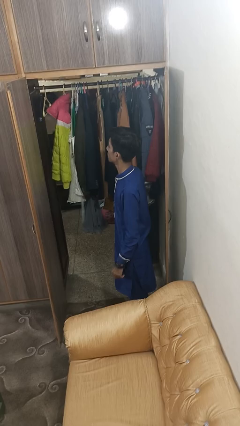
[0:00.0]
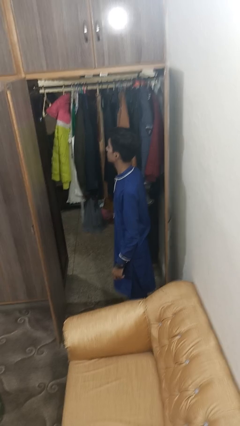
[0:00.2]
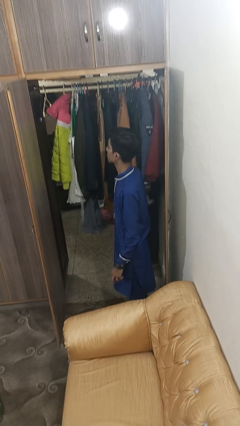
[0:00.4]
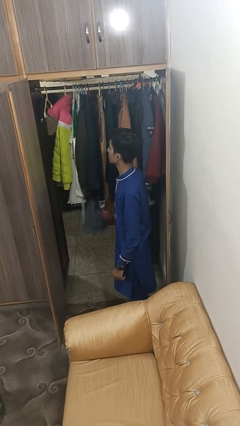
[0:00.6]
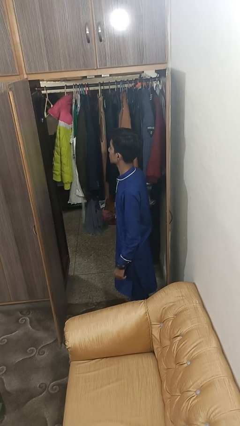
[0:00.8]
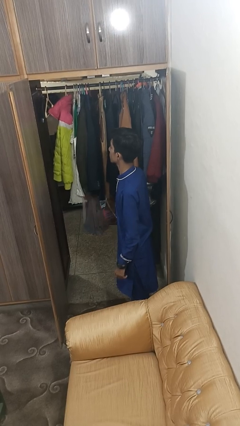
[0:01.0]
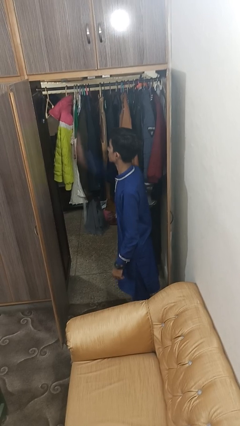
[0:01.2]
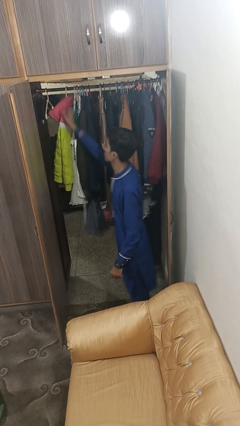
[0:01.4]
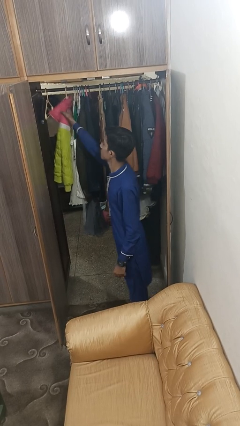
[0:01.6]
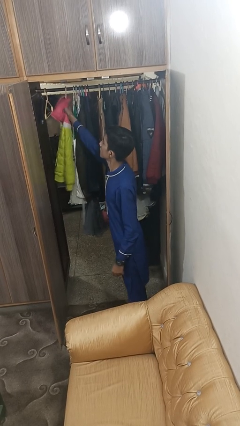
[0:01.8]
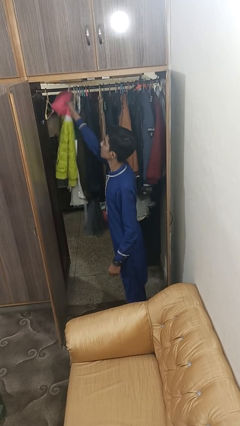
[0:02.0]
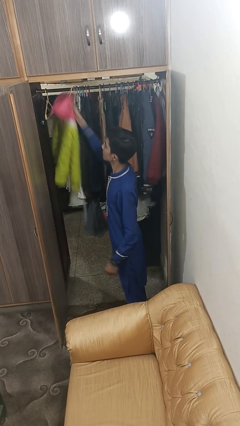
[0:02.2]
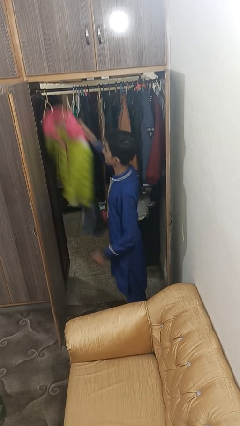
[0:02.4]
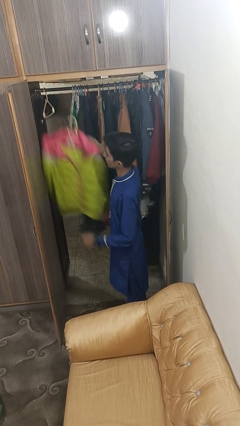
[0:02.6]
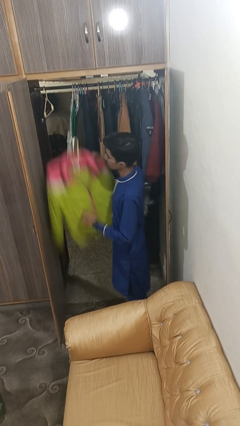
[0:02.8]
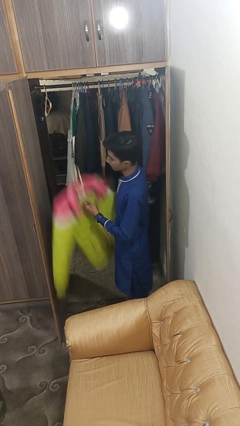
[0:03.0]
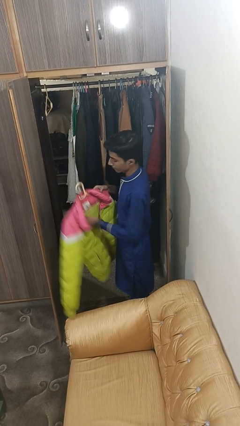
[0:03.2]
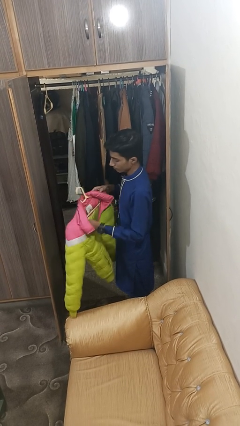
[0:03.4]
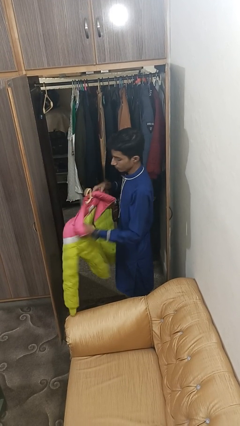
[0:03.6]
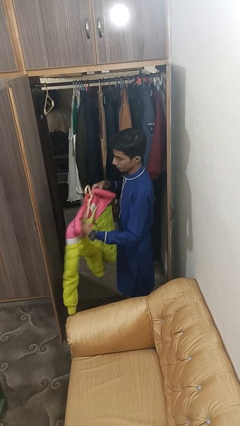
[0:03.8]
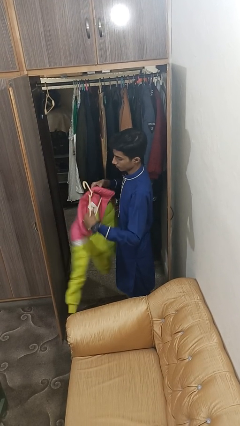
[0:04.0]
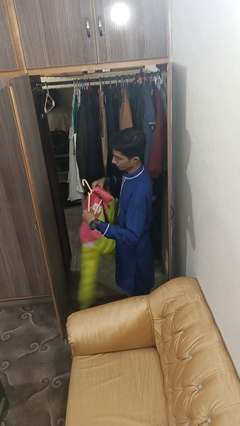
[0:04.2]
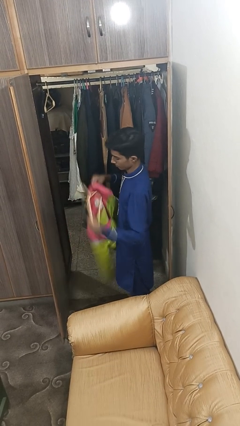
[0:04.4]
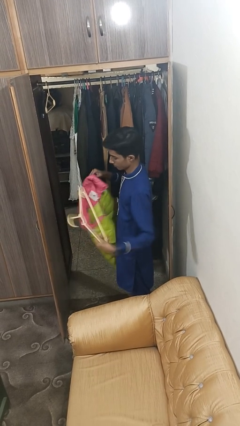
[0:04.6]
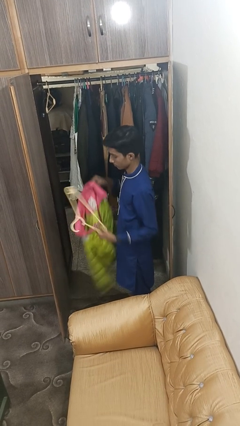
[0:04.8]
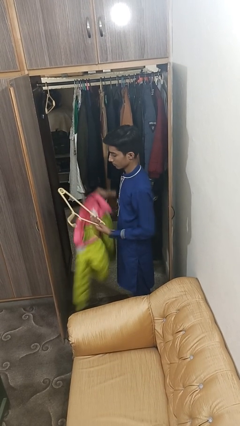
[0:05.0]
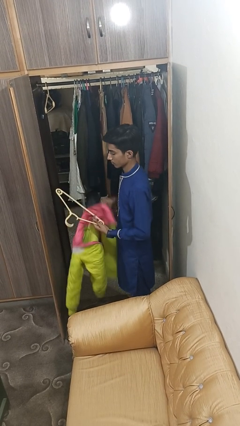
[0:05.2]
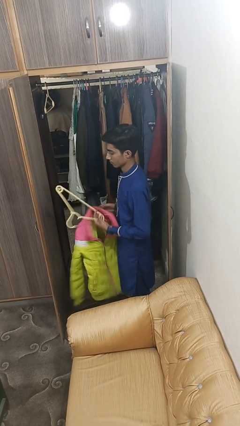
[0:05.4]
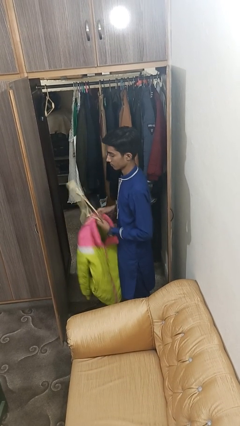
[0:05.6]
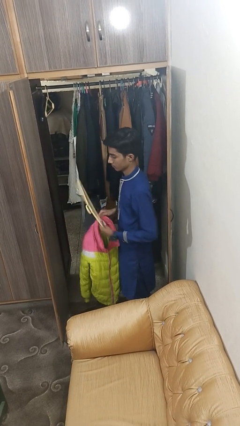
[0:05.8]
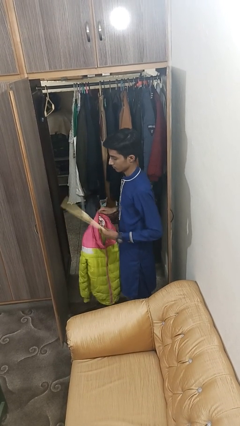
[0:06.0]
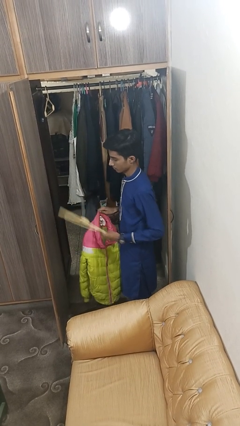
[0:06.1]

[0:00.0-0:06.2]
person takes clothes from closet

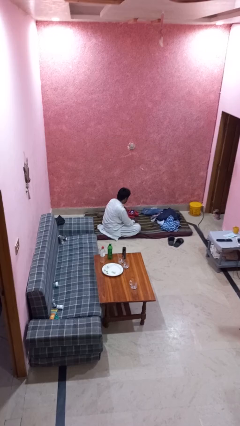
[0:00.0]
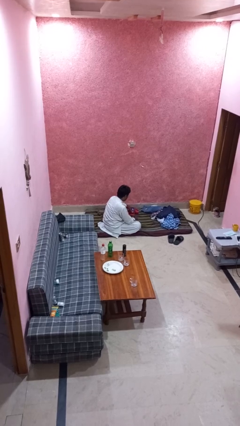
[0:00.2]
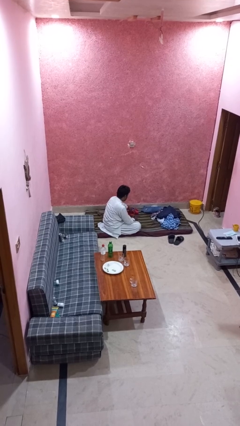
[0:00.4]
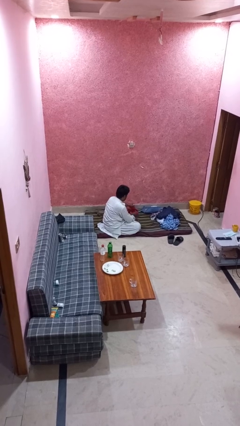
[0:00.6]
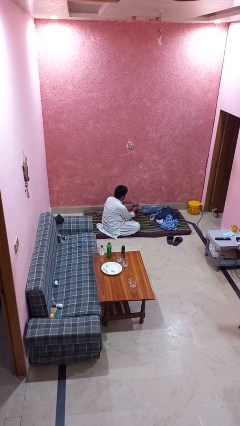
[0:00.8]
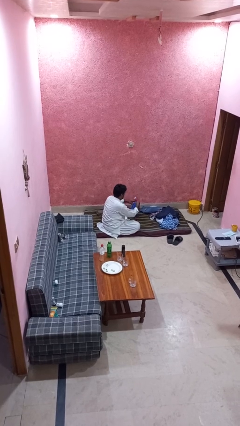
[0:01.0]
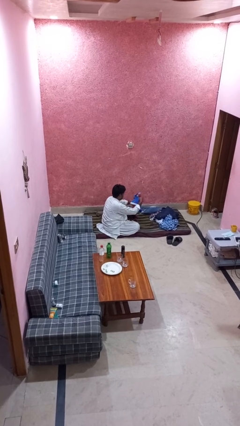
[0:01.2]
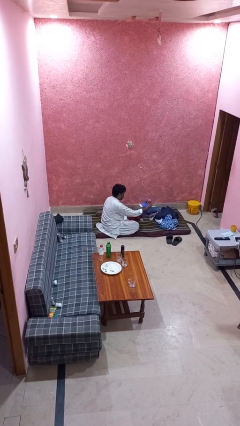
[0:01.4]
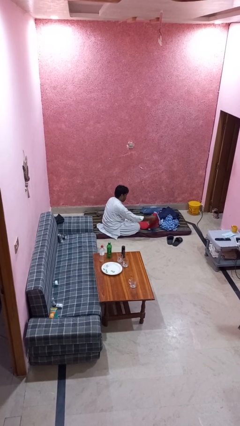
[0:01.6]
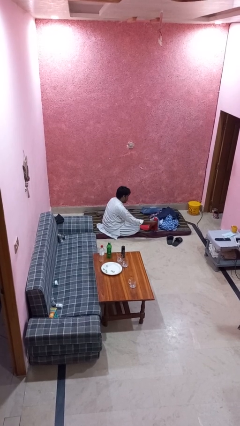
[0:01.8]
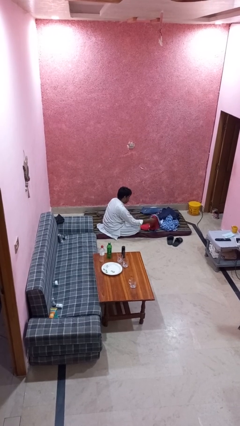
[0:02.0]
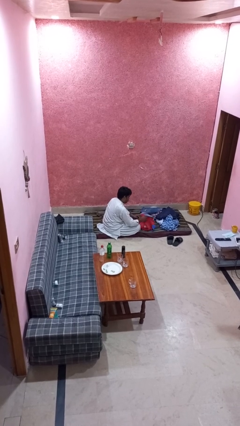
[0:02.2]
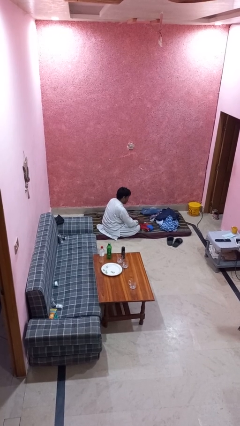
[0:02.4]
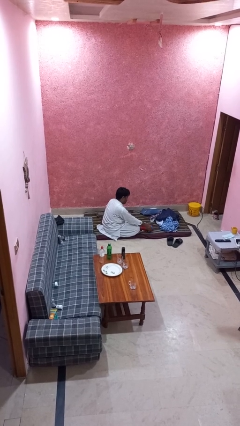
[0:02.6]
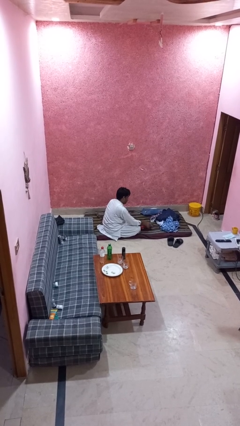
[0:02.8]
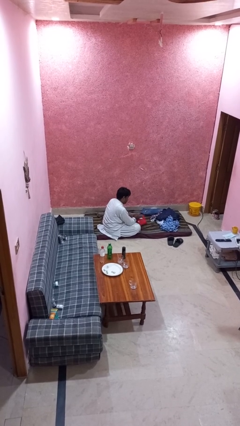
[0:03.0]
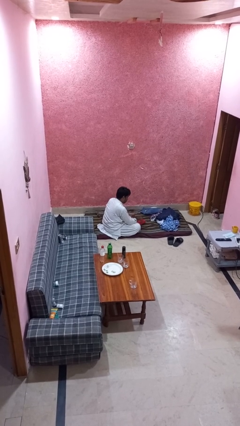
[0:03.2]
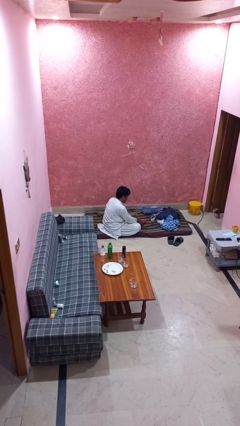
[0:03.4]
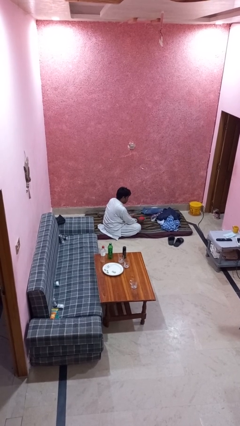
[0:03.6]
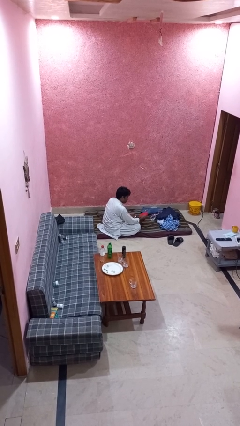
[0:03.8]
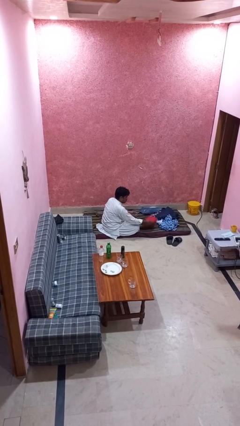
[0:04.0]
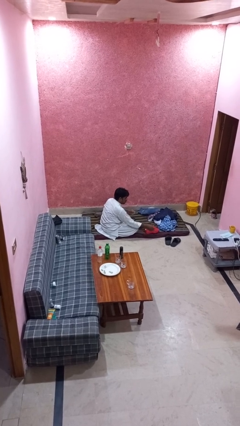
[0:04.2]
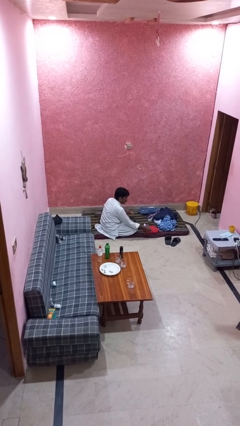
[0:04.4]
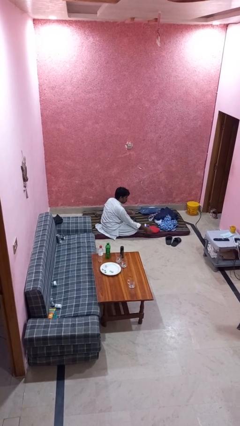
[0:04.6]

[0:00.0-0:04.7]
person folds shirt

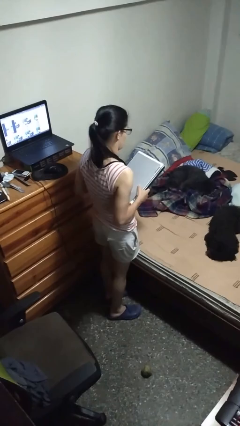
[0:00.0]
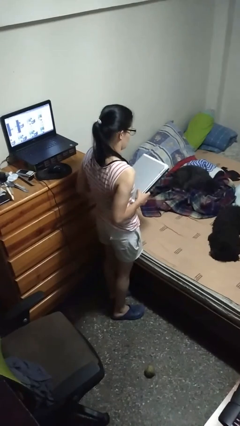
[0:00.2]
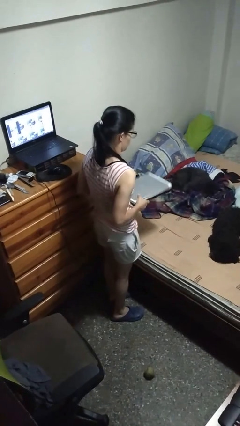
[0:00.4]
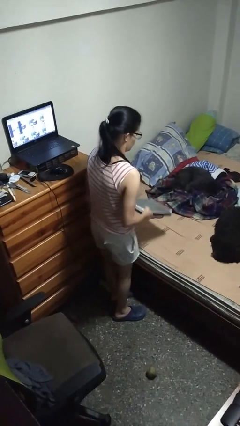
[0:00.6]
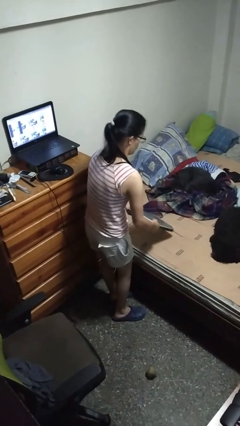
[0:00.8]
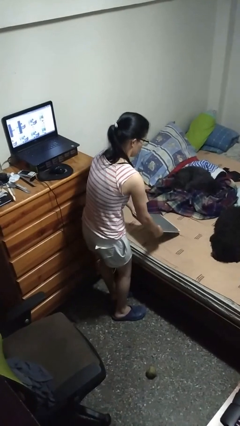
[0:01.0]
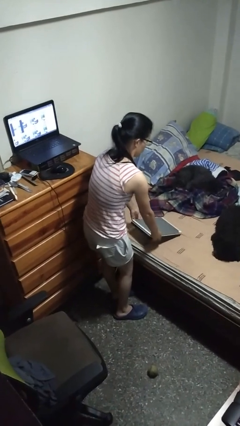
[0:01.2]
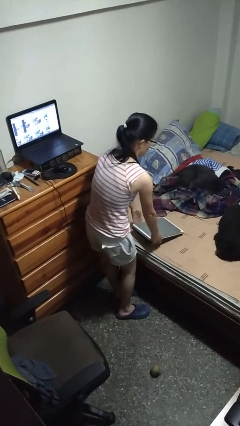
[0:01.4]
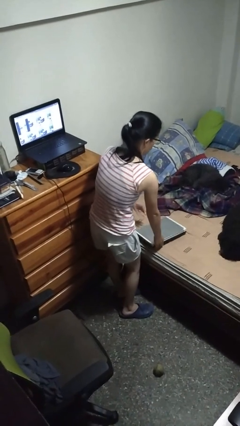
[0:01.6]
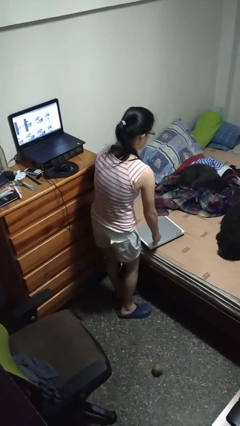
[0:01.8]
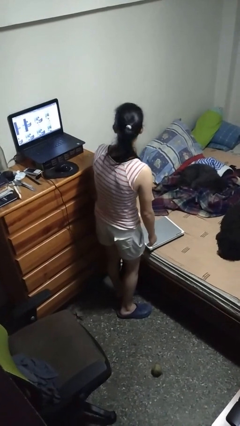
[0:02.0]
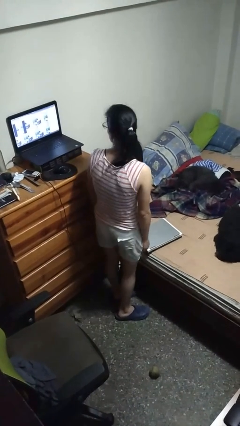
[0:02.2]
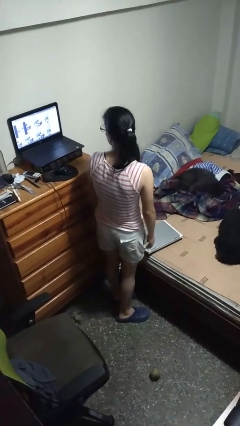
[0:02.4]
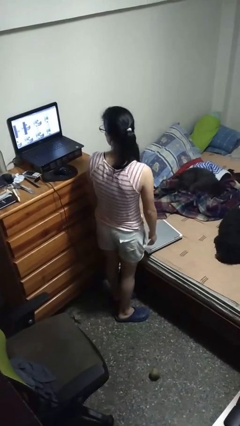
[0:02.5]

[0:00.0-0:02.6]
person puts down object on bed

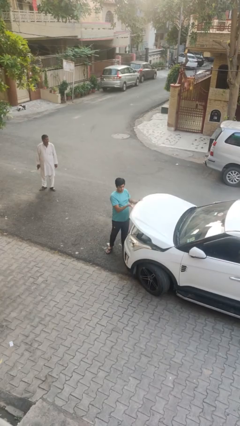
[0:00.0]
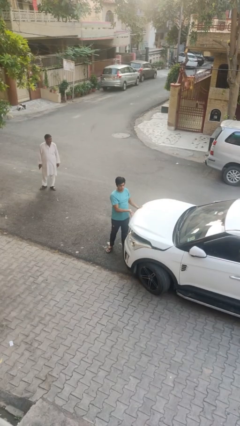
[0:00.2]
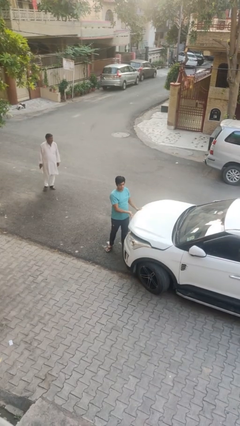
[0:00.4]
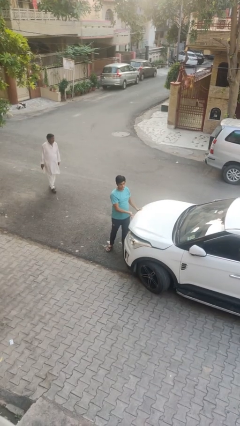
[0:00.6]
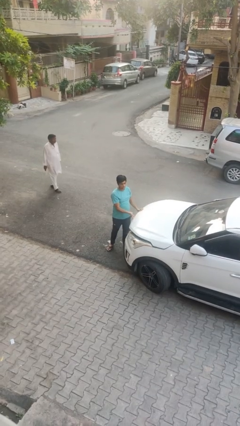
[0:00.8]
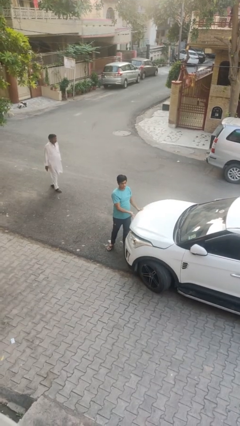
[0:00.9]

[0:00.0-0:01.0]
person closes car hood

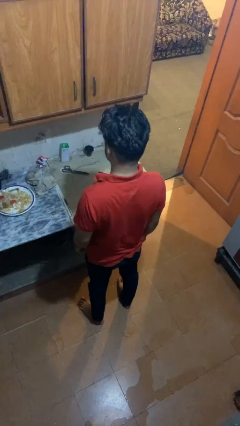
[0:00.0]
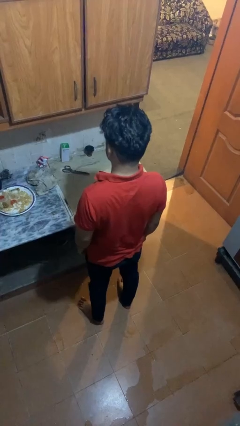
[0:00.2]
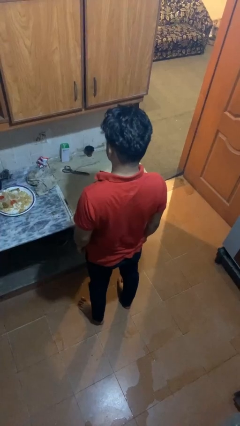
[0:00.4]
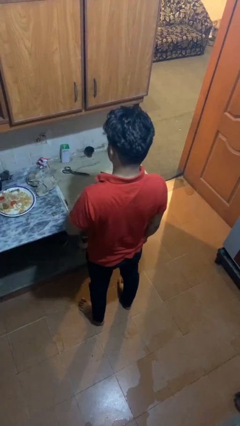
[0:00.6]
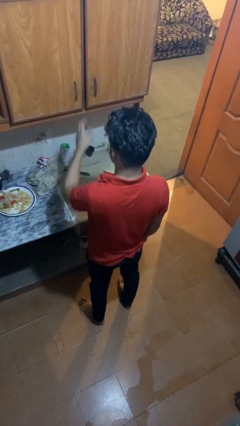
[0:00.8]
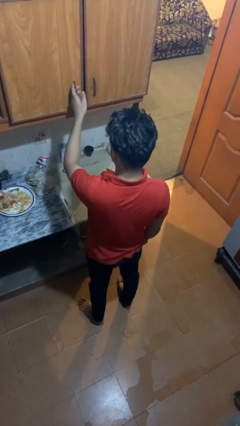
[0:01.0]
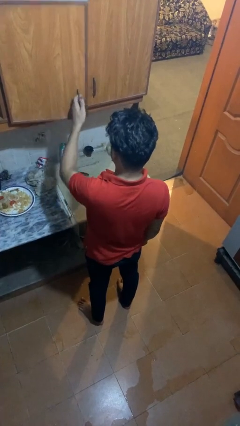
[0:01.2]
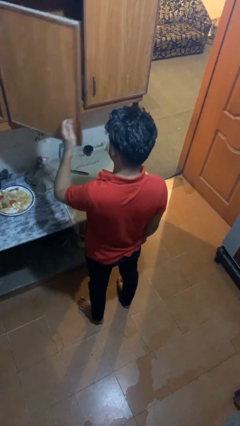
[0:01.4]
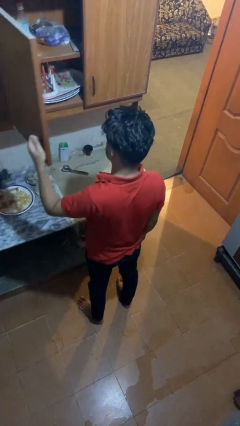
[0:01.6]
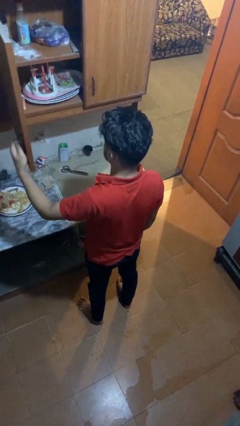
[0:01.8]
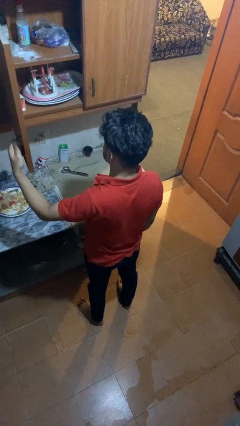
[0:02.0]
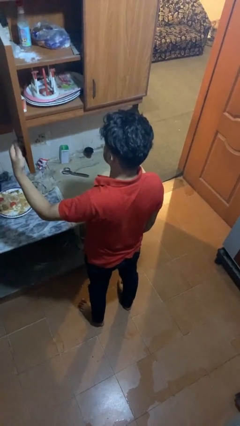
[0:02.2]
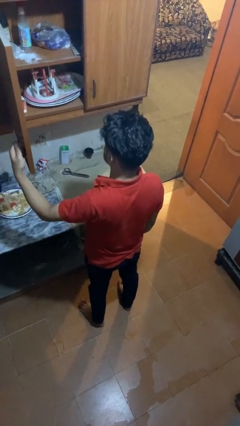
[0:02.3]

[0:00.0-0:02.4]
person opens cabinet

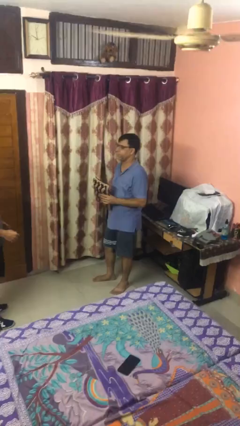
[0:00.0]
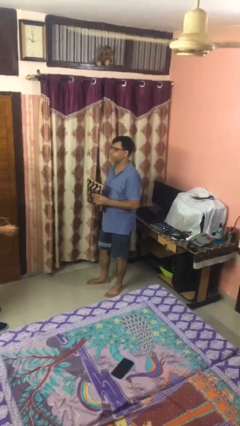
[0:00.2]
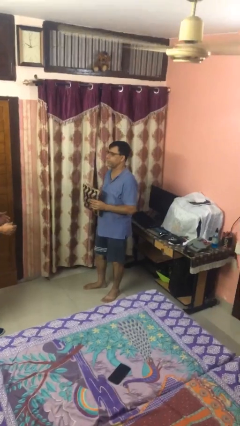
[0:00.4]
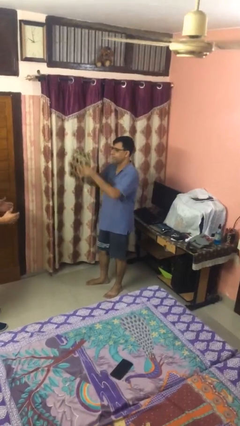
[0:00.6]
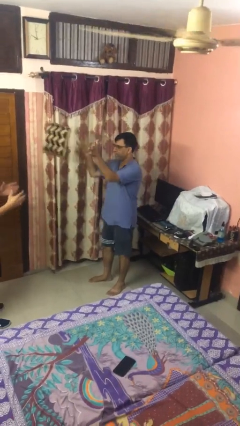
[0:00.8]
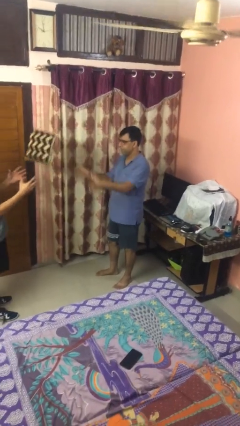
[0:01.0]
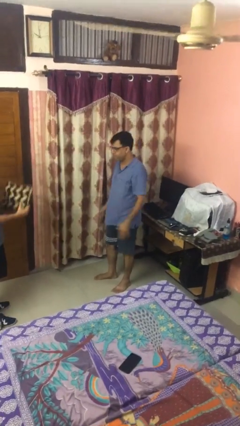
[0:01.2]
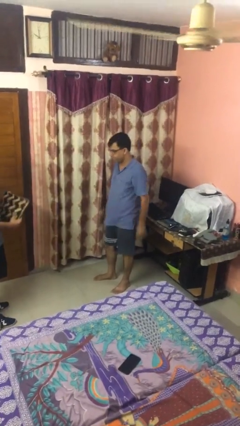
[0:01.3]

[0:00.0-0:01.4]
person throws object to person
